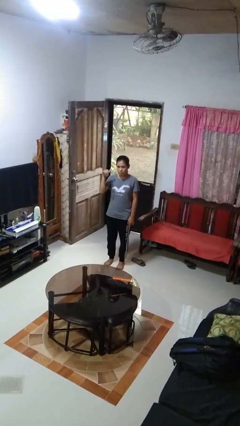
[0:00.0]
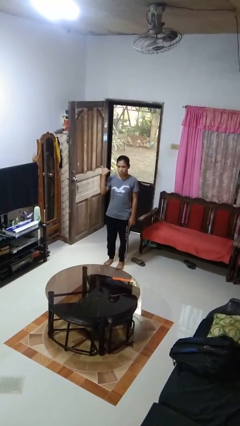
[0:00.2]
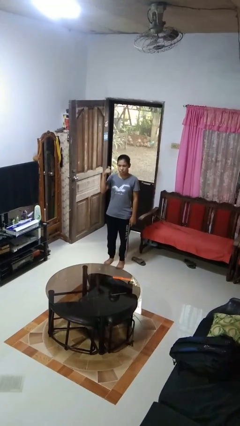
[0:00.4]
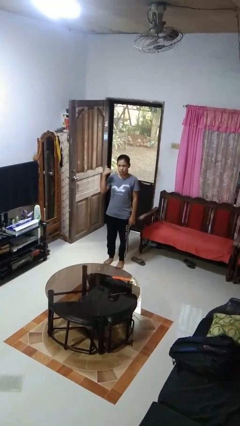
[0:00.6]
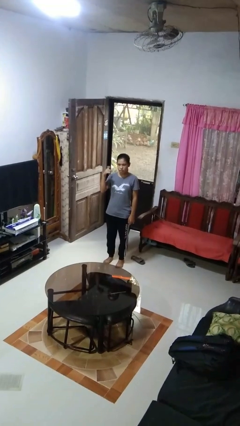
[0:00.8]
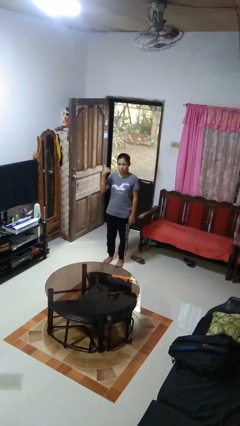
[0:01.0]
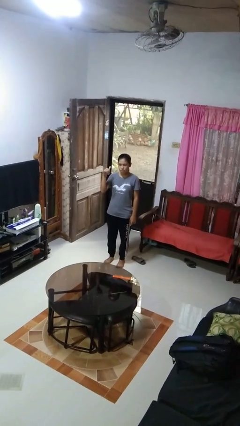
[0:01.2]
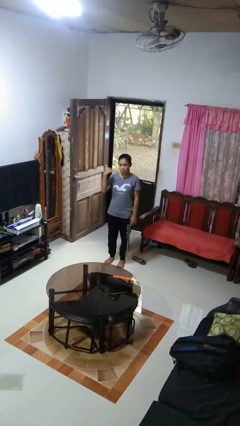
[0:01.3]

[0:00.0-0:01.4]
person gestures hang loose

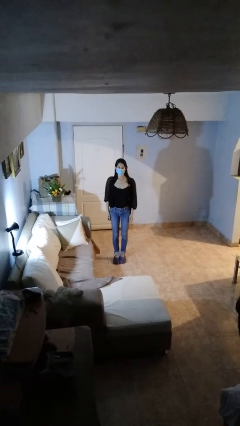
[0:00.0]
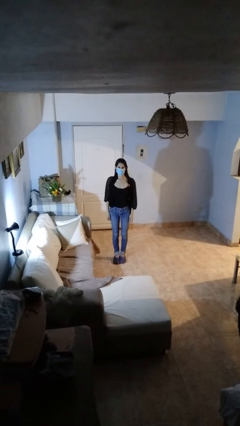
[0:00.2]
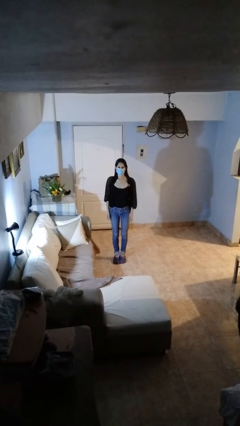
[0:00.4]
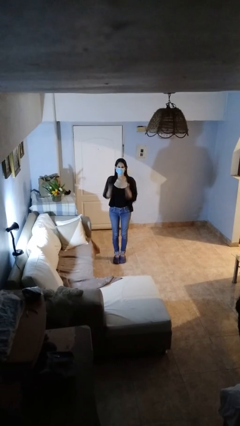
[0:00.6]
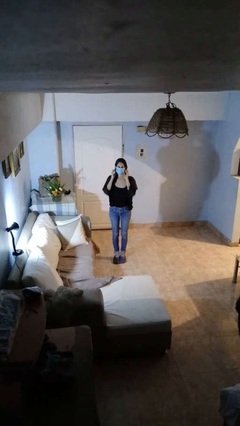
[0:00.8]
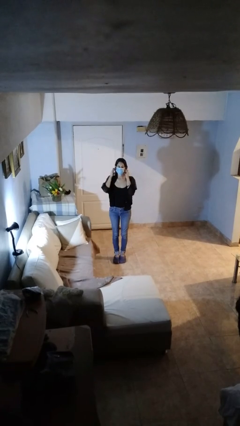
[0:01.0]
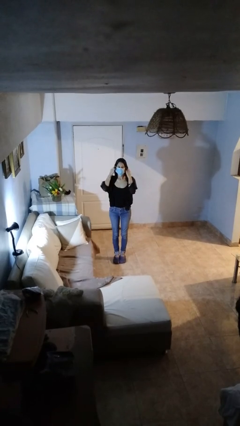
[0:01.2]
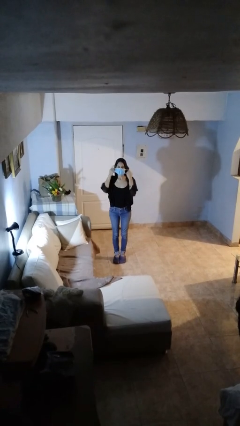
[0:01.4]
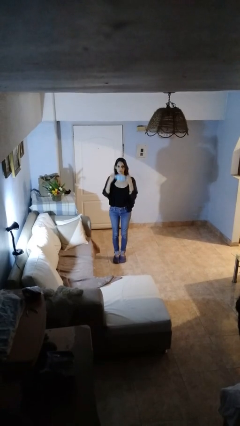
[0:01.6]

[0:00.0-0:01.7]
person takes off facemask

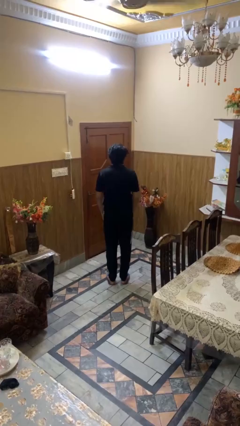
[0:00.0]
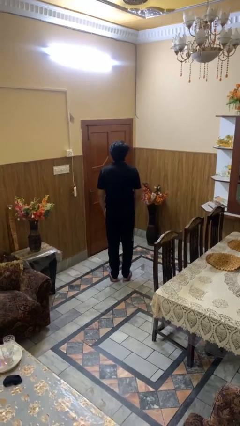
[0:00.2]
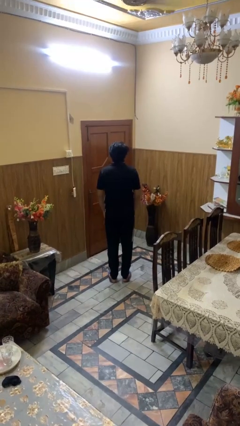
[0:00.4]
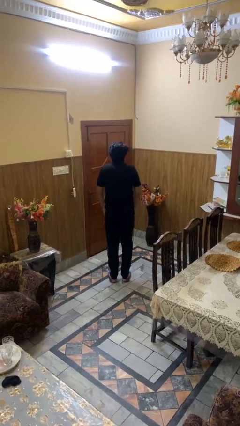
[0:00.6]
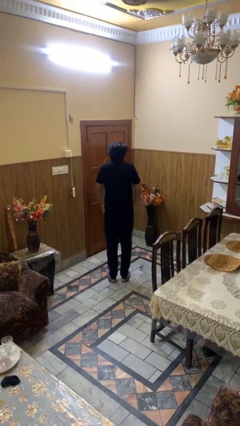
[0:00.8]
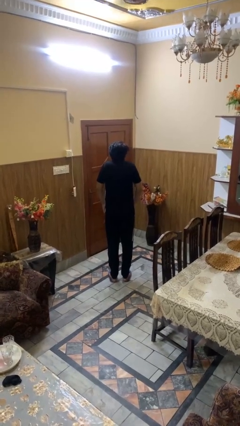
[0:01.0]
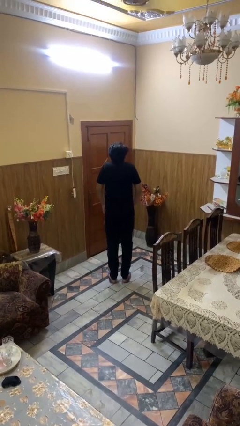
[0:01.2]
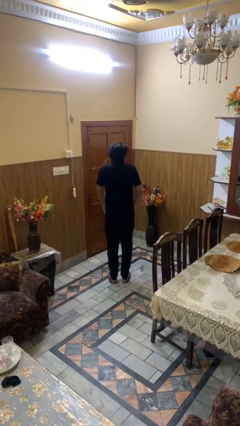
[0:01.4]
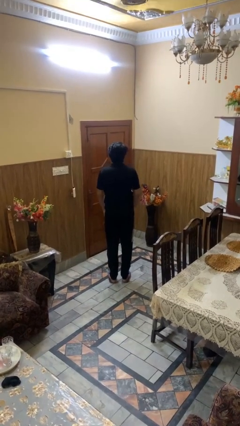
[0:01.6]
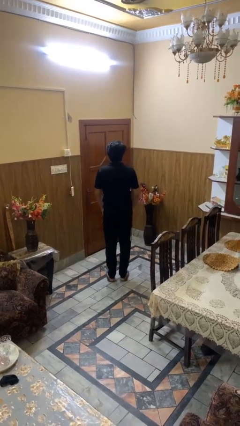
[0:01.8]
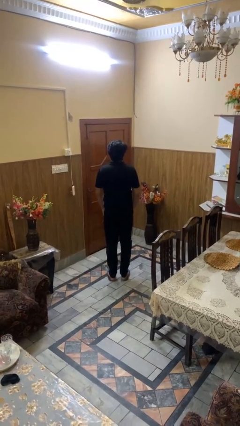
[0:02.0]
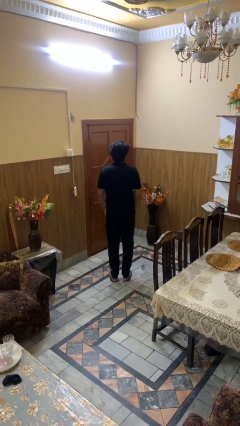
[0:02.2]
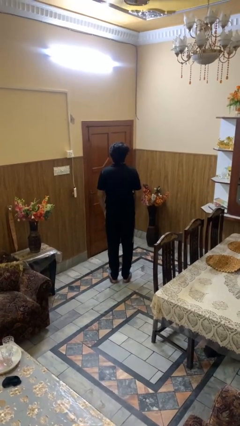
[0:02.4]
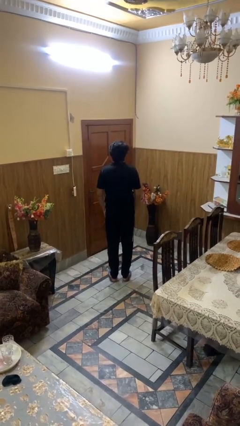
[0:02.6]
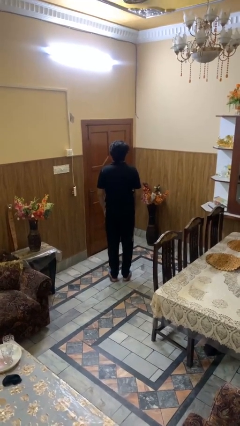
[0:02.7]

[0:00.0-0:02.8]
person shrugs

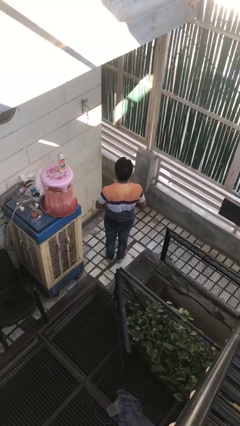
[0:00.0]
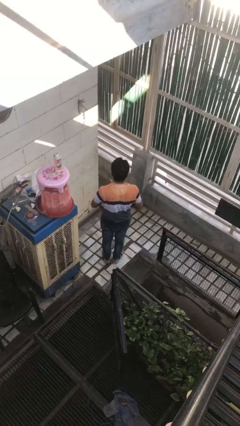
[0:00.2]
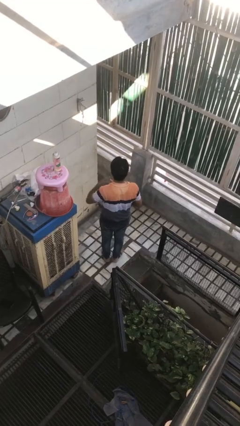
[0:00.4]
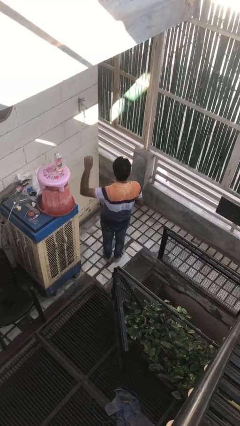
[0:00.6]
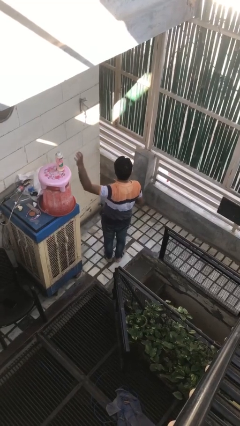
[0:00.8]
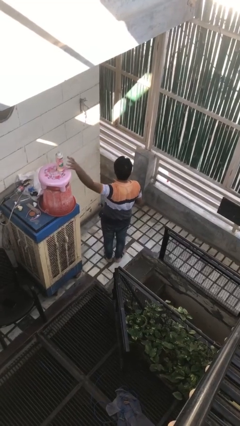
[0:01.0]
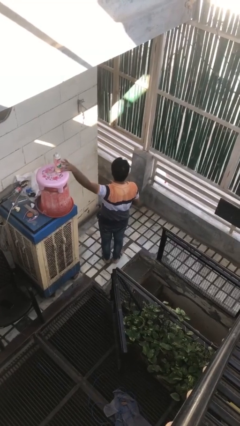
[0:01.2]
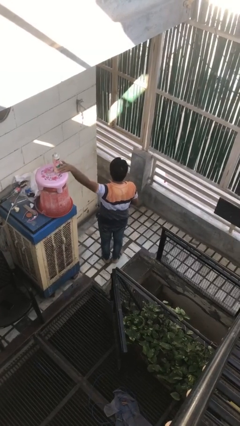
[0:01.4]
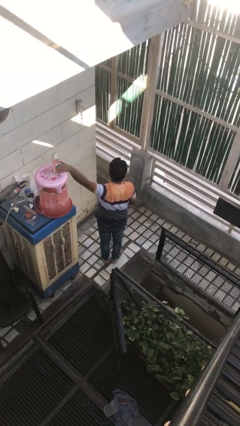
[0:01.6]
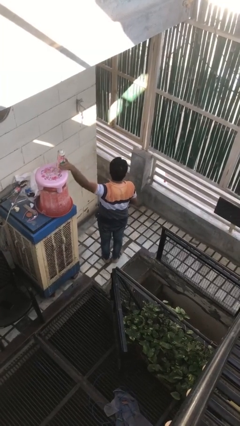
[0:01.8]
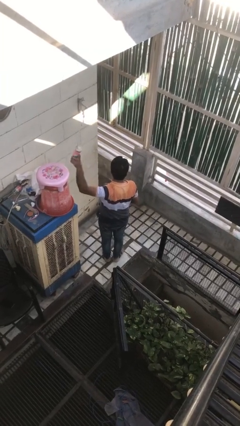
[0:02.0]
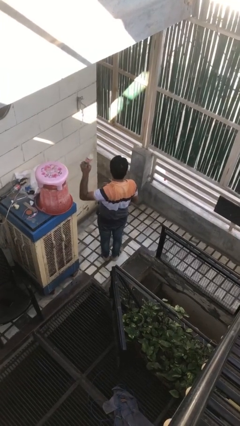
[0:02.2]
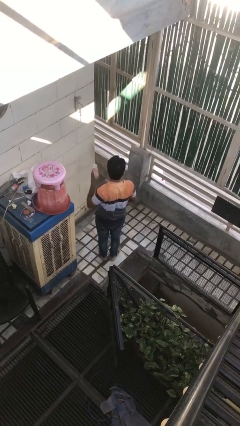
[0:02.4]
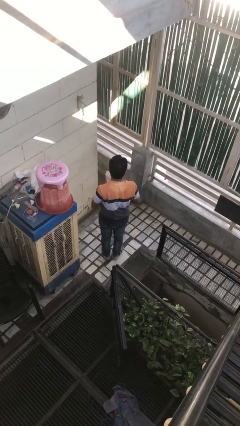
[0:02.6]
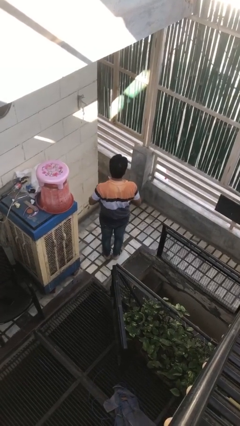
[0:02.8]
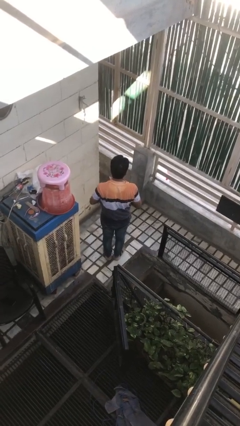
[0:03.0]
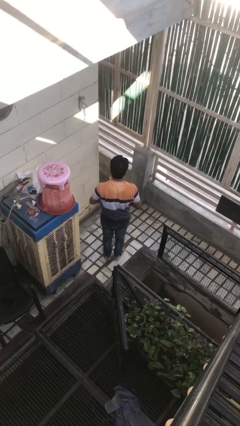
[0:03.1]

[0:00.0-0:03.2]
person picks up object from countertop

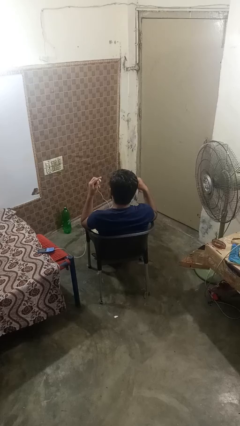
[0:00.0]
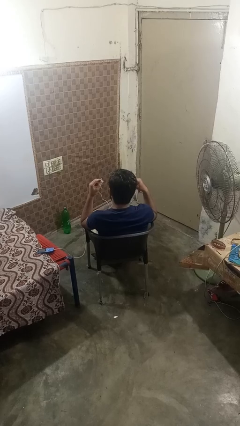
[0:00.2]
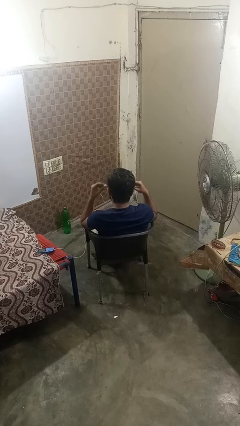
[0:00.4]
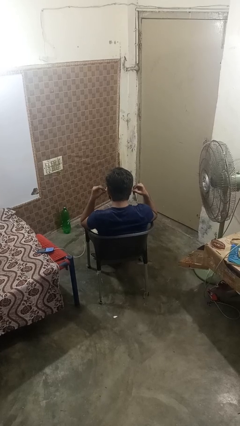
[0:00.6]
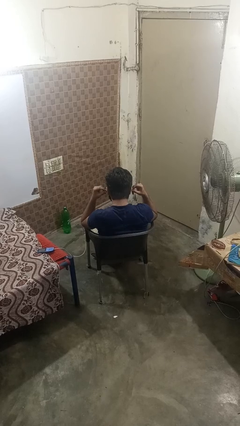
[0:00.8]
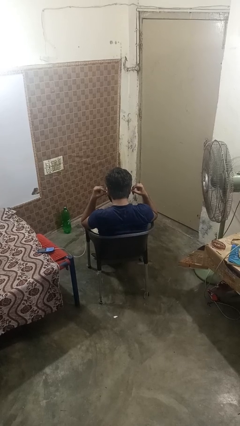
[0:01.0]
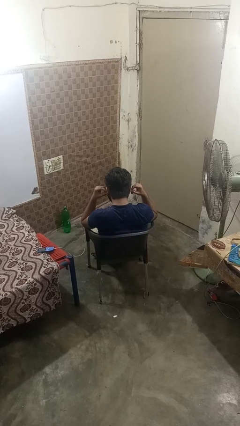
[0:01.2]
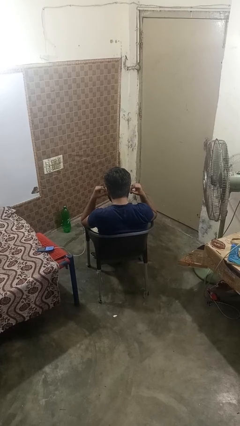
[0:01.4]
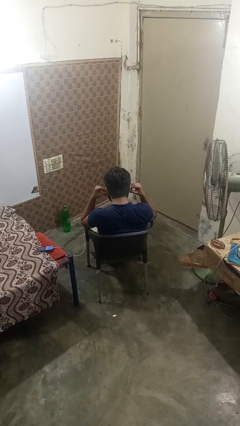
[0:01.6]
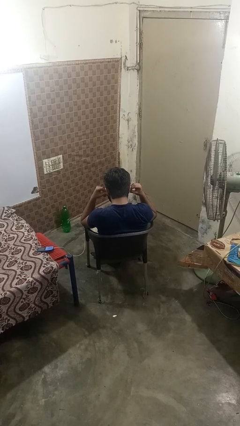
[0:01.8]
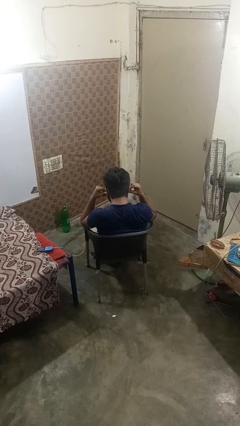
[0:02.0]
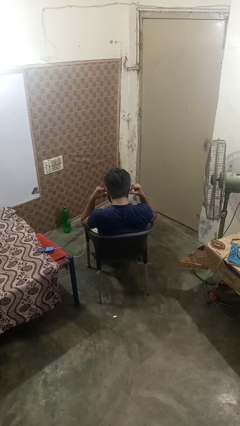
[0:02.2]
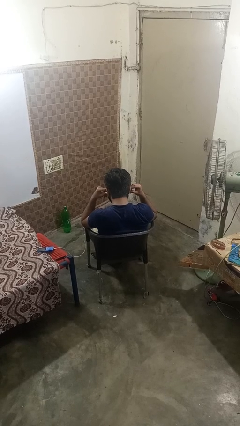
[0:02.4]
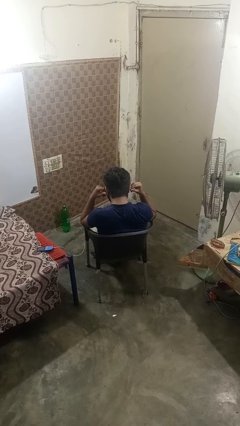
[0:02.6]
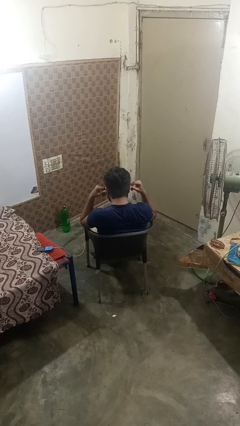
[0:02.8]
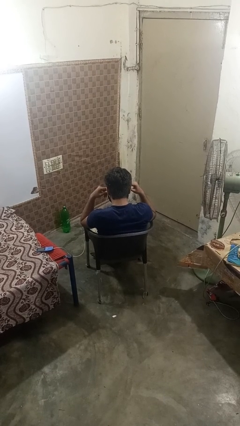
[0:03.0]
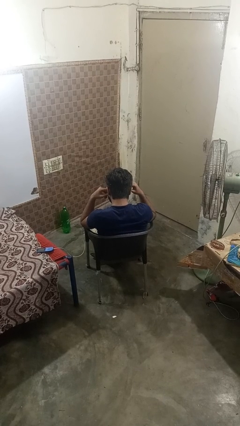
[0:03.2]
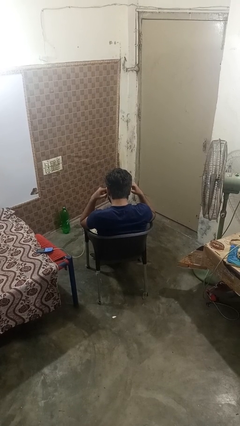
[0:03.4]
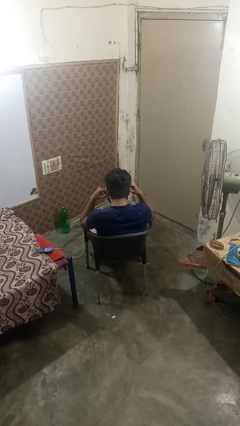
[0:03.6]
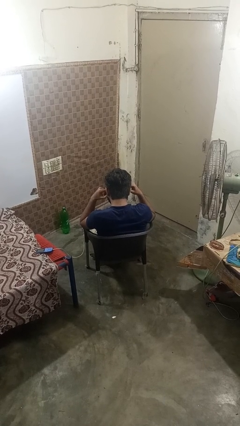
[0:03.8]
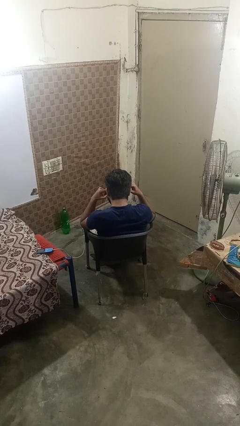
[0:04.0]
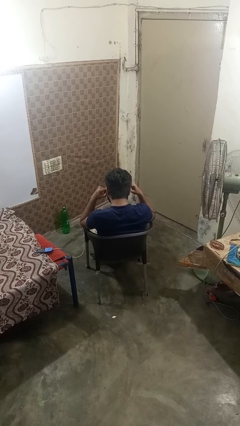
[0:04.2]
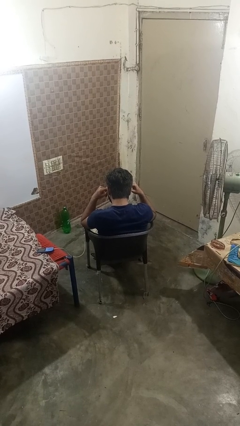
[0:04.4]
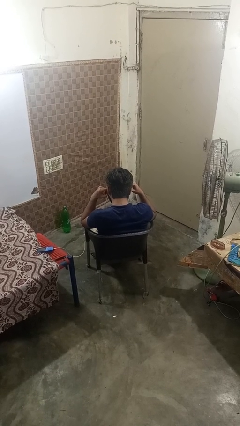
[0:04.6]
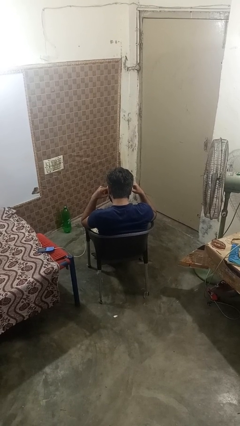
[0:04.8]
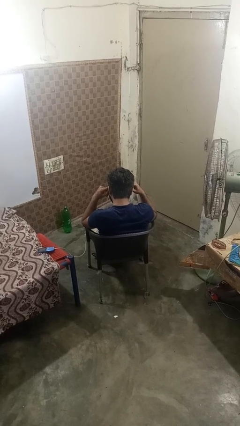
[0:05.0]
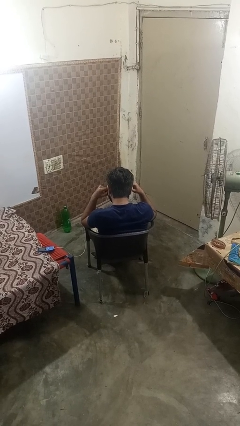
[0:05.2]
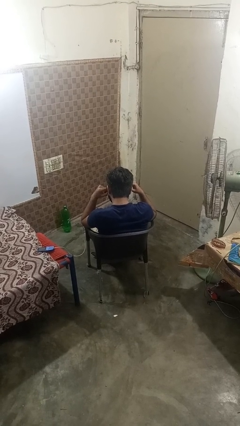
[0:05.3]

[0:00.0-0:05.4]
person puts on headphones

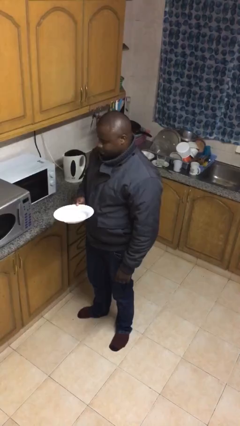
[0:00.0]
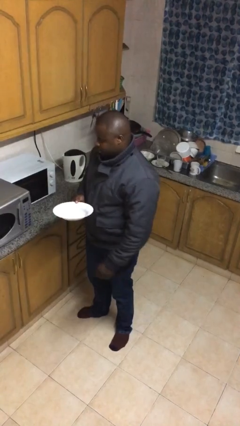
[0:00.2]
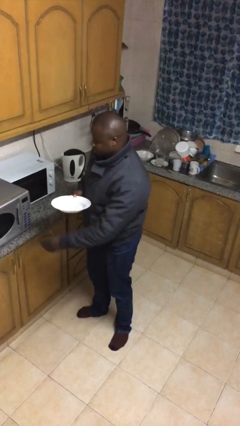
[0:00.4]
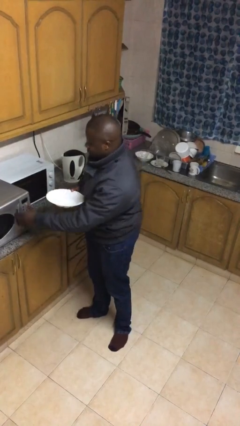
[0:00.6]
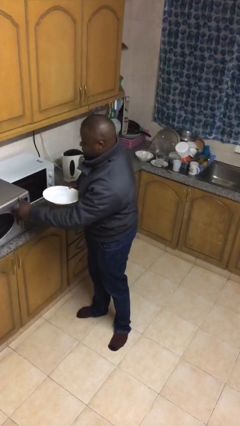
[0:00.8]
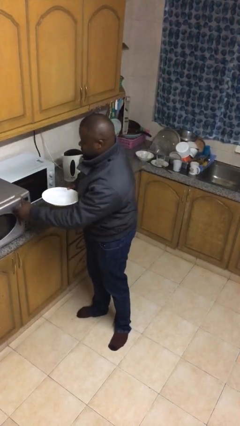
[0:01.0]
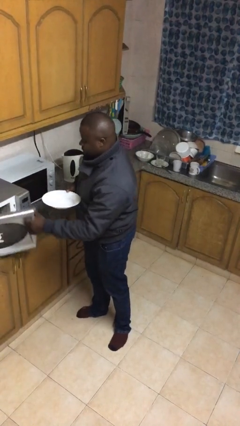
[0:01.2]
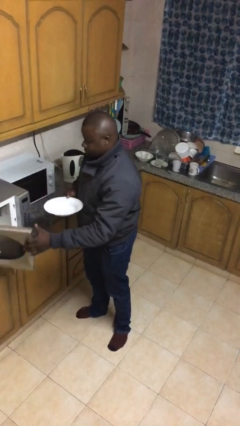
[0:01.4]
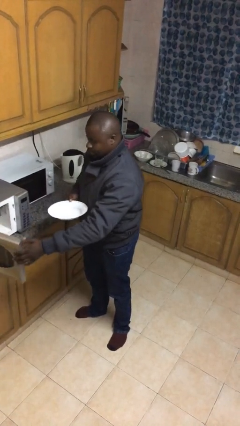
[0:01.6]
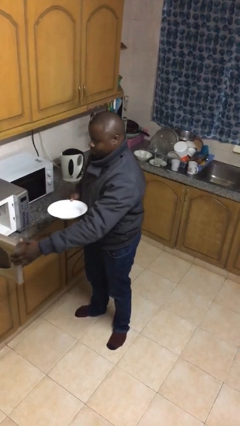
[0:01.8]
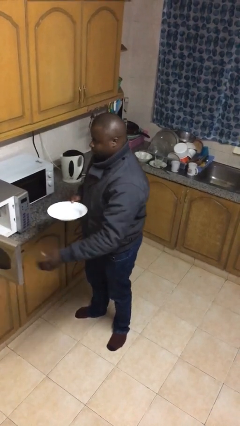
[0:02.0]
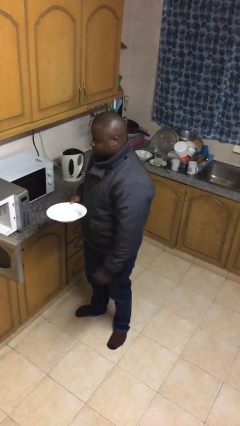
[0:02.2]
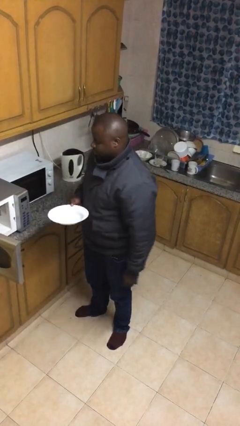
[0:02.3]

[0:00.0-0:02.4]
person opens microwave

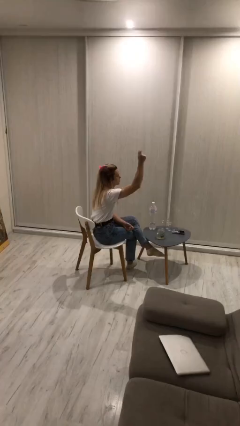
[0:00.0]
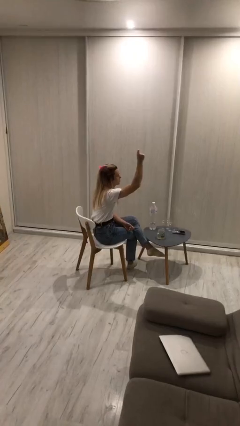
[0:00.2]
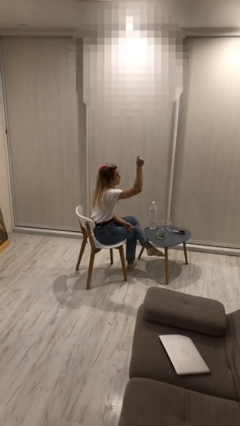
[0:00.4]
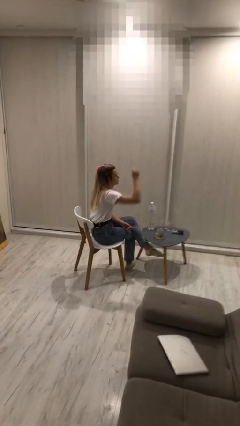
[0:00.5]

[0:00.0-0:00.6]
person snaps fingers
